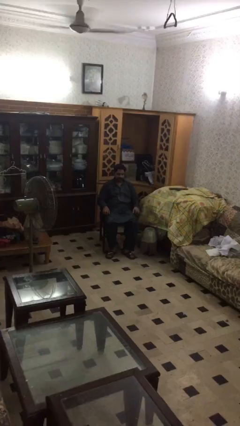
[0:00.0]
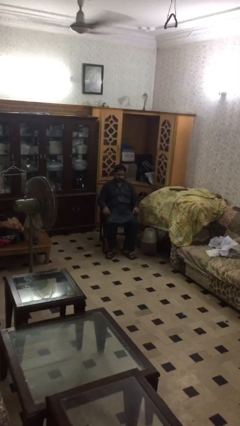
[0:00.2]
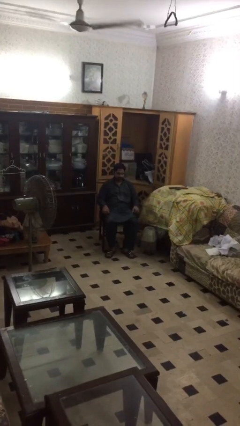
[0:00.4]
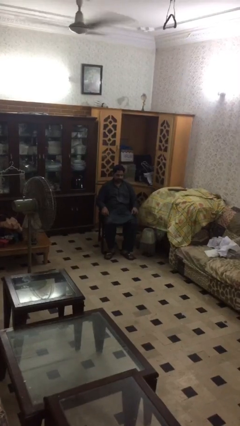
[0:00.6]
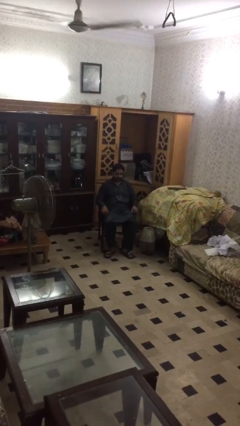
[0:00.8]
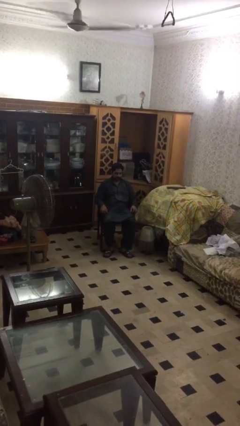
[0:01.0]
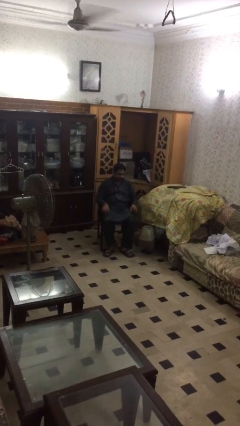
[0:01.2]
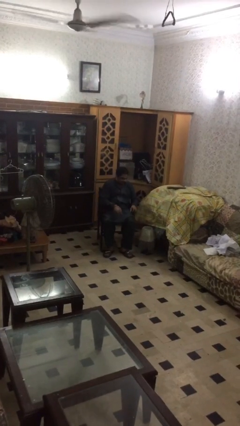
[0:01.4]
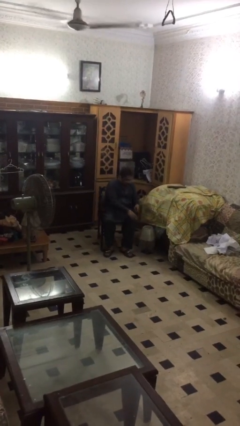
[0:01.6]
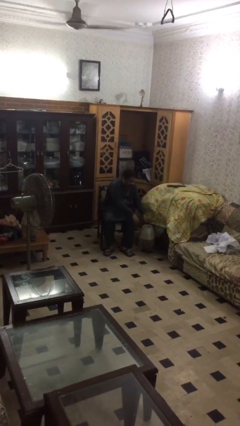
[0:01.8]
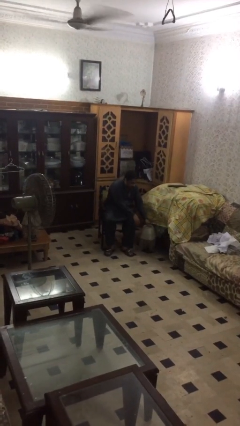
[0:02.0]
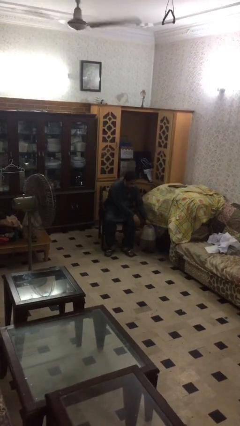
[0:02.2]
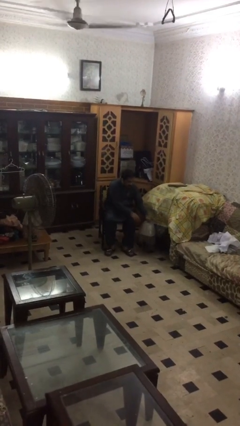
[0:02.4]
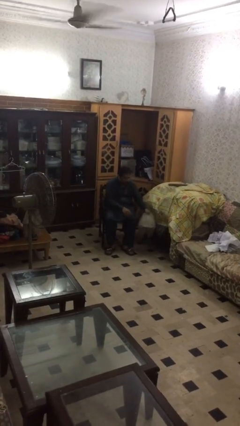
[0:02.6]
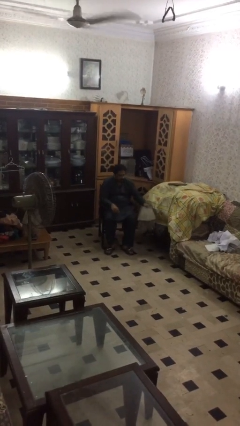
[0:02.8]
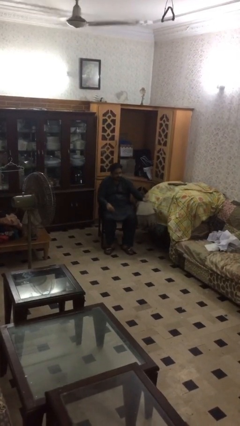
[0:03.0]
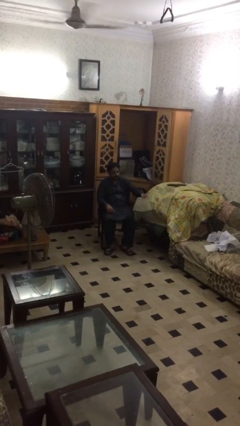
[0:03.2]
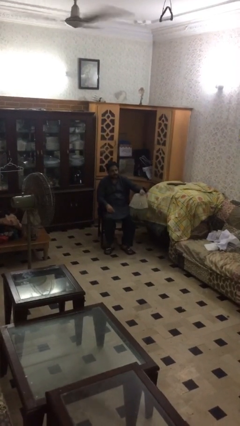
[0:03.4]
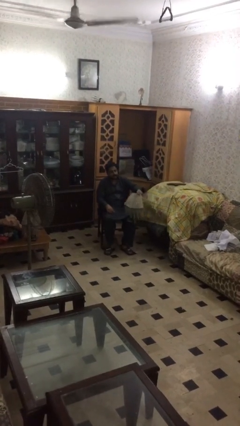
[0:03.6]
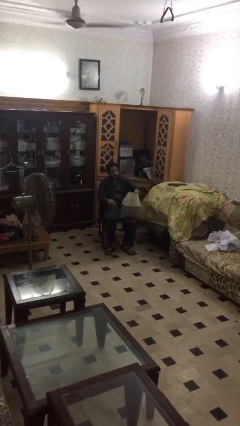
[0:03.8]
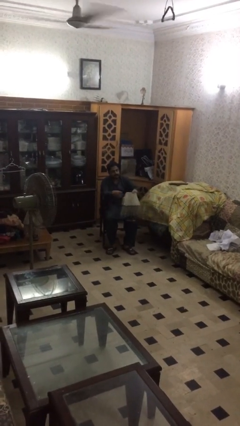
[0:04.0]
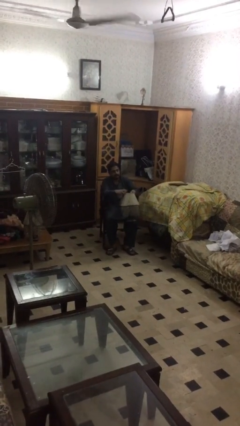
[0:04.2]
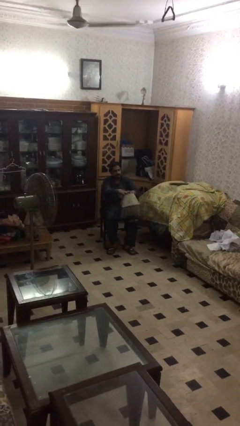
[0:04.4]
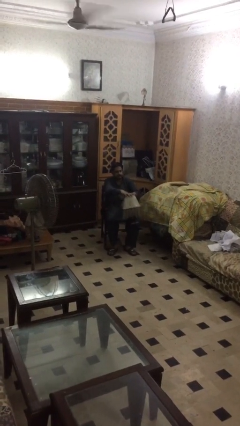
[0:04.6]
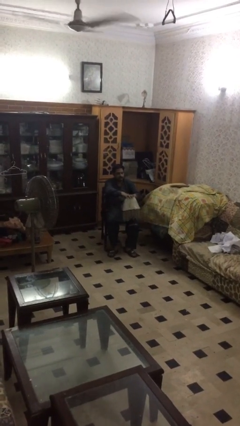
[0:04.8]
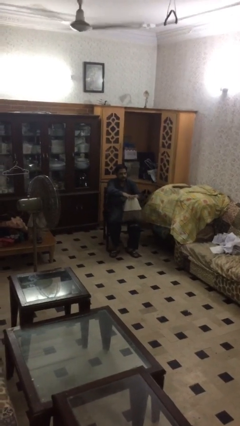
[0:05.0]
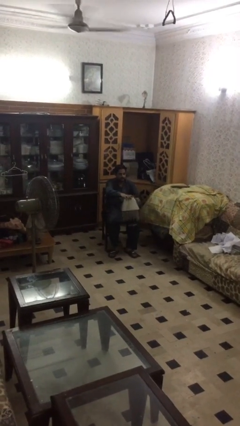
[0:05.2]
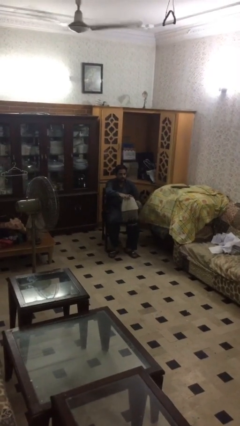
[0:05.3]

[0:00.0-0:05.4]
person picks up object from floor

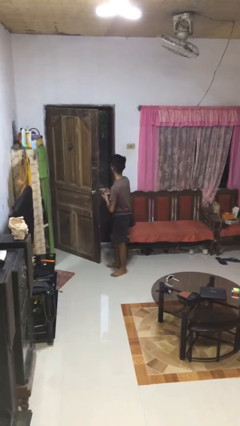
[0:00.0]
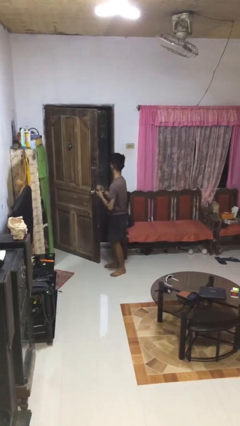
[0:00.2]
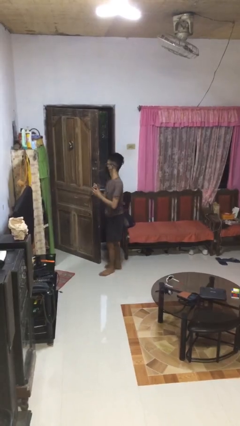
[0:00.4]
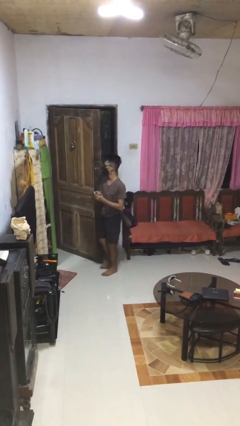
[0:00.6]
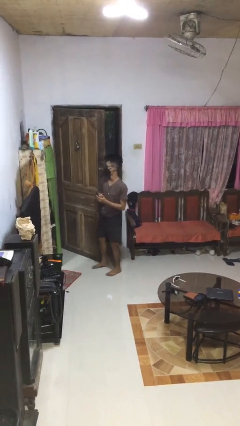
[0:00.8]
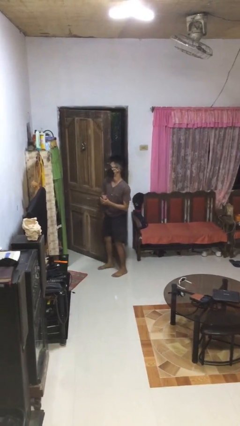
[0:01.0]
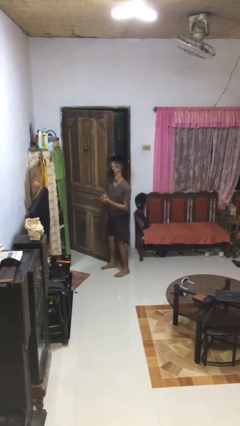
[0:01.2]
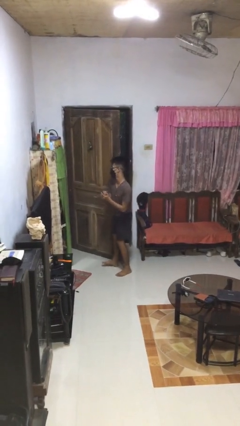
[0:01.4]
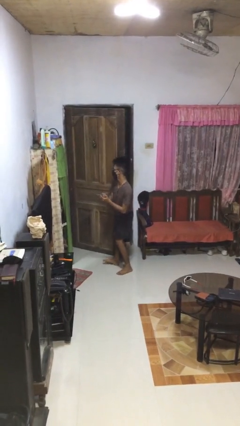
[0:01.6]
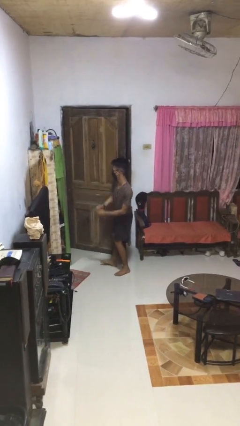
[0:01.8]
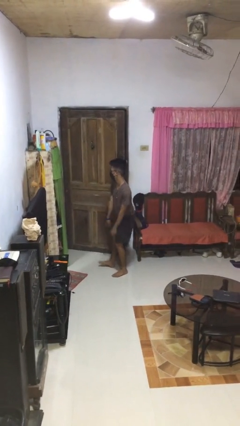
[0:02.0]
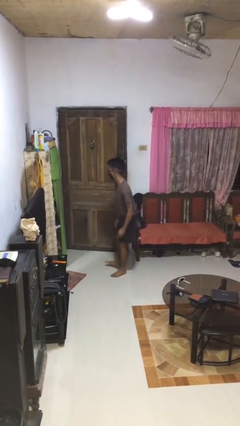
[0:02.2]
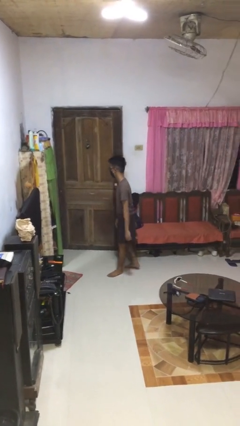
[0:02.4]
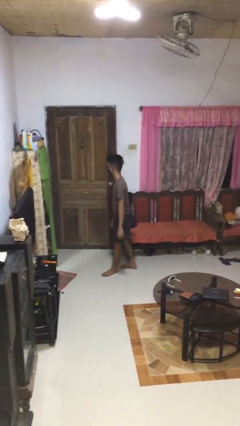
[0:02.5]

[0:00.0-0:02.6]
person closes door with hip

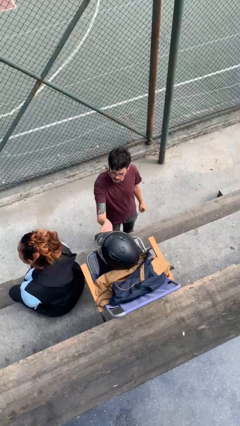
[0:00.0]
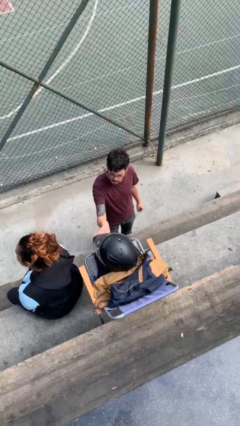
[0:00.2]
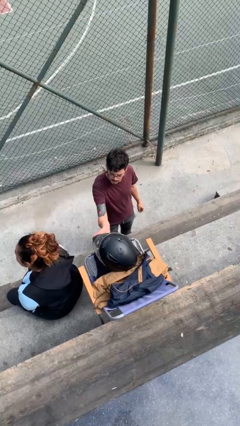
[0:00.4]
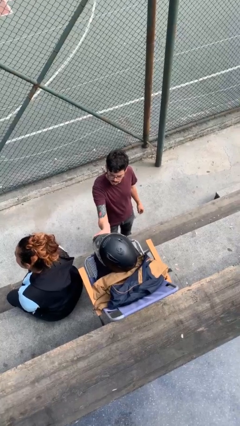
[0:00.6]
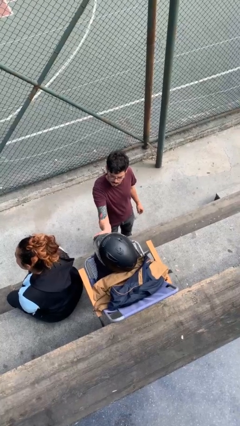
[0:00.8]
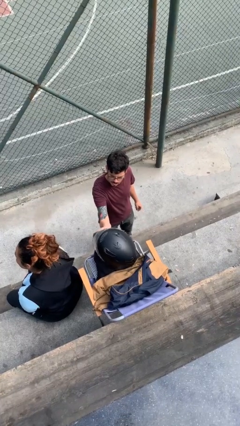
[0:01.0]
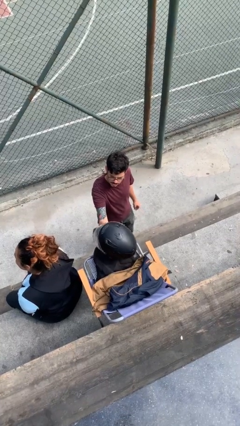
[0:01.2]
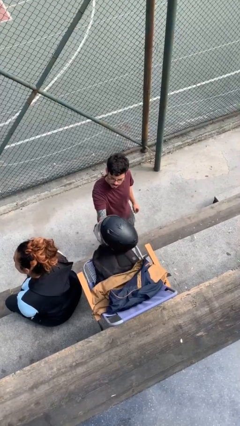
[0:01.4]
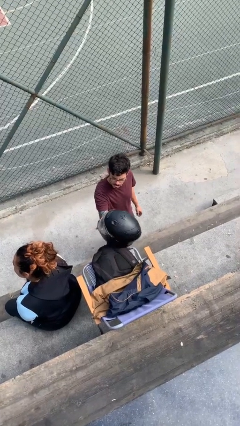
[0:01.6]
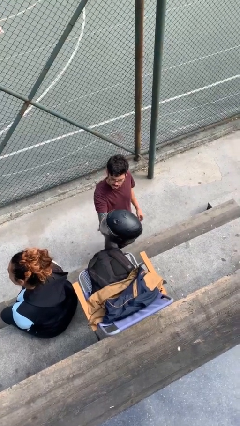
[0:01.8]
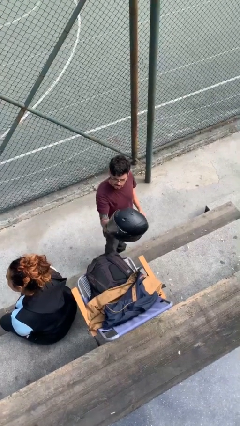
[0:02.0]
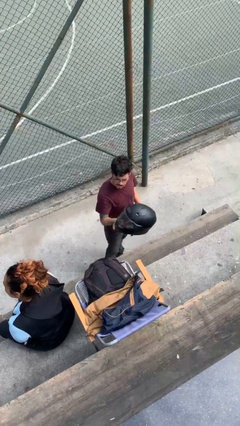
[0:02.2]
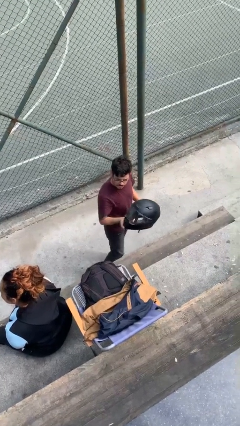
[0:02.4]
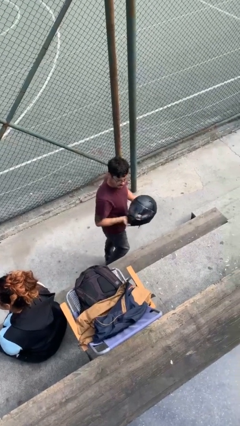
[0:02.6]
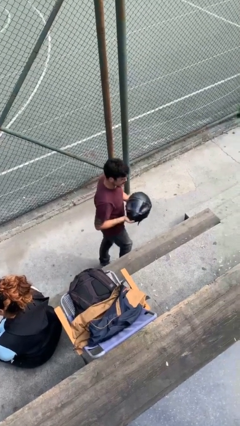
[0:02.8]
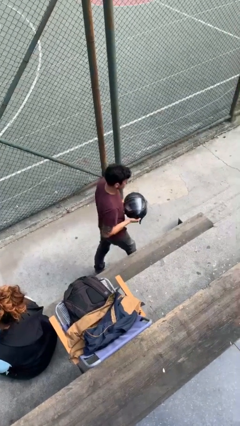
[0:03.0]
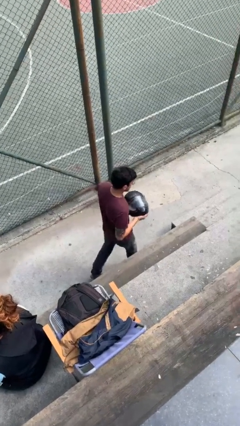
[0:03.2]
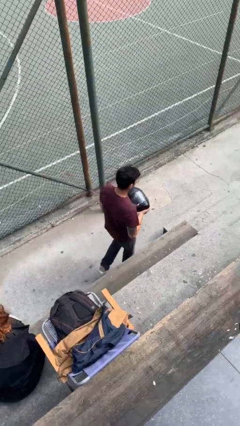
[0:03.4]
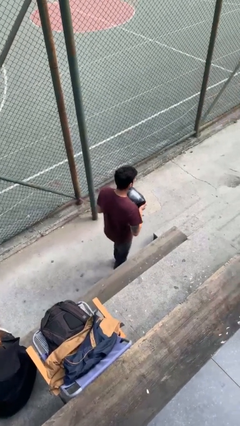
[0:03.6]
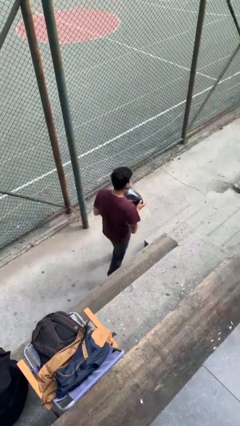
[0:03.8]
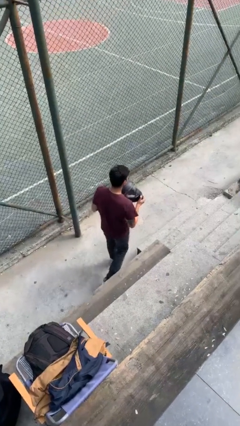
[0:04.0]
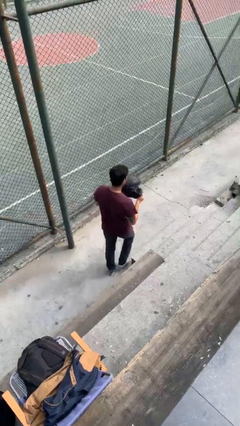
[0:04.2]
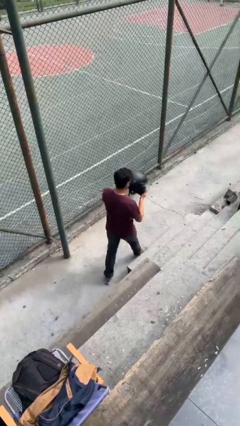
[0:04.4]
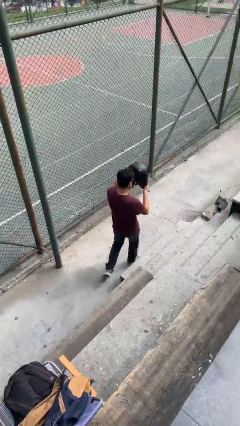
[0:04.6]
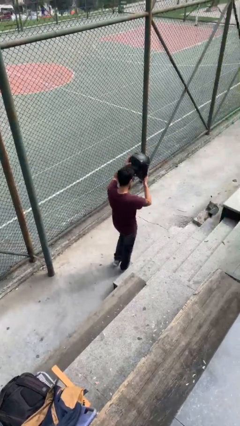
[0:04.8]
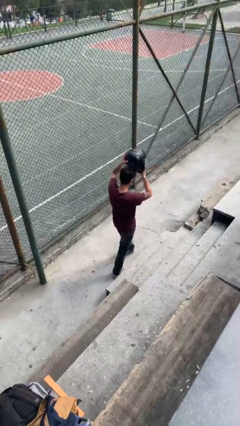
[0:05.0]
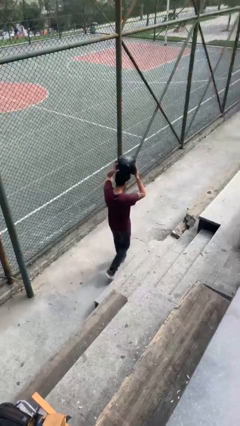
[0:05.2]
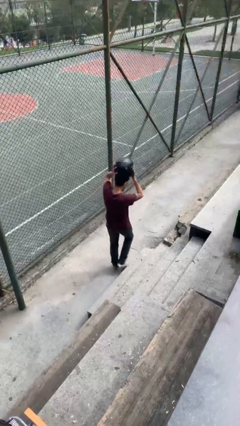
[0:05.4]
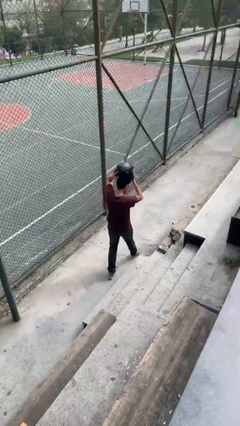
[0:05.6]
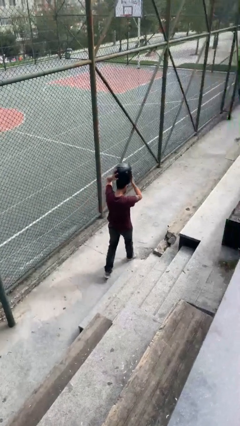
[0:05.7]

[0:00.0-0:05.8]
person steals object from person

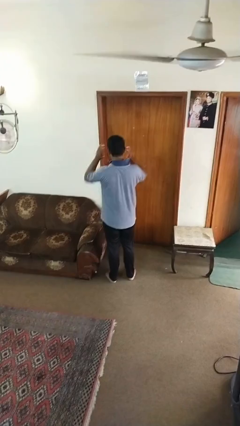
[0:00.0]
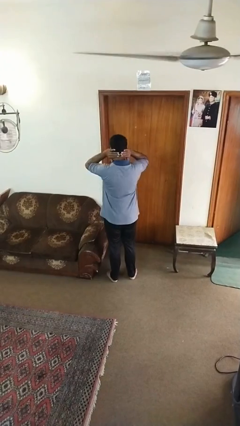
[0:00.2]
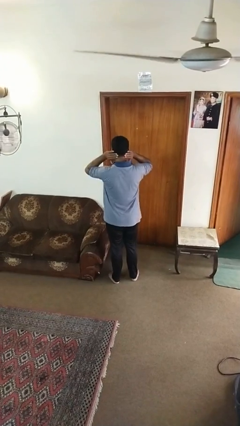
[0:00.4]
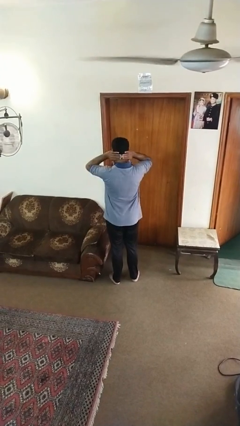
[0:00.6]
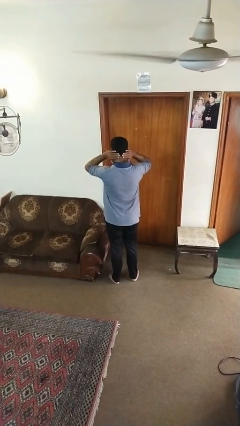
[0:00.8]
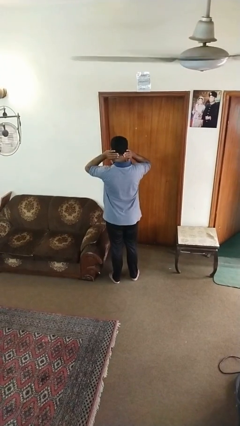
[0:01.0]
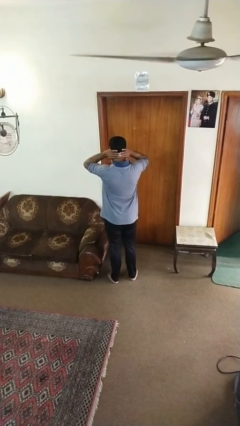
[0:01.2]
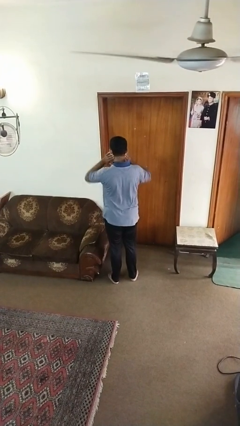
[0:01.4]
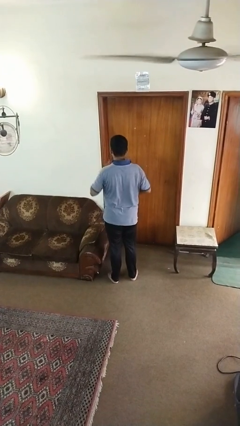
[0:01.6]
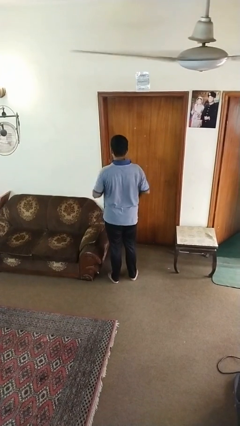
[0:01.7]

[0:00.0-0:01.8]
person rubs neck

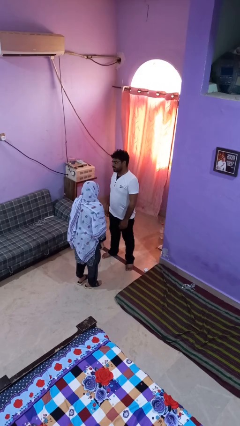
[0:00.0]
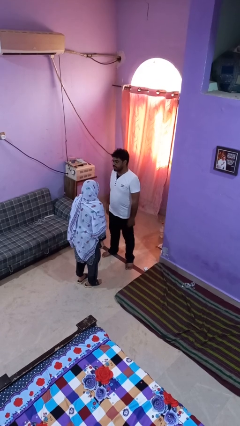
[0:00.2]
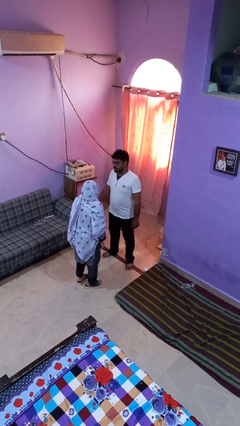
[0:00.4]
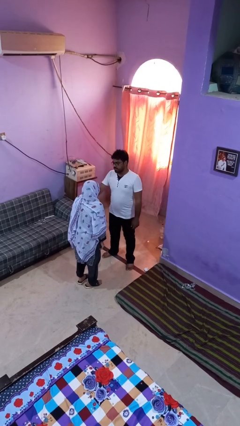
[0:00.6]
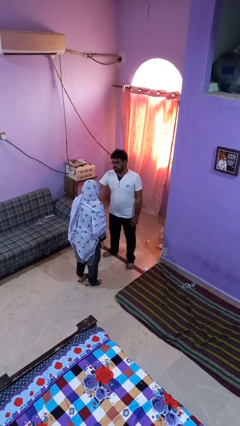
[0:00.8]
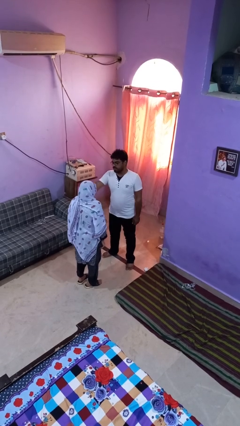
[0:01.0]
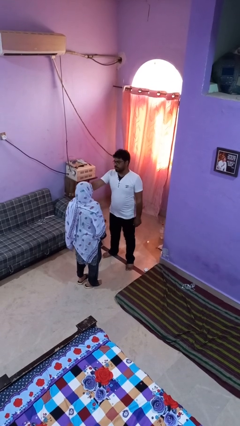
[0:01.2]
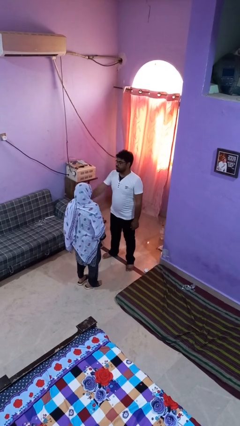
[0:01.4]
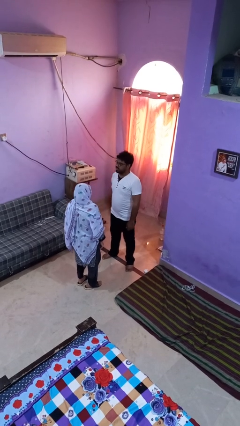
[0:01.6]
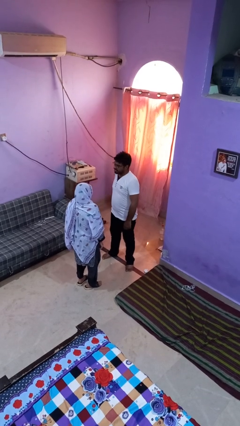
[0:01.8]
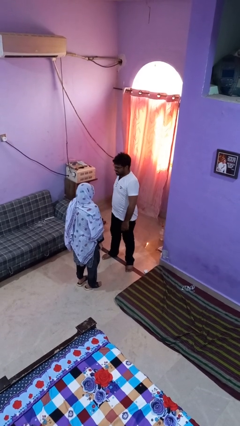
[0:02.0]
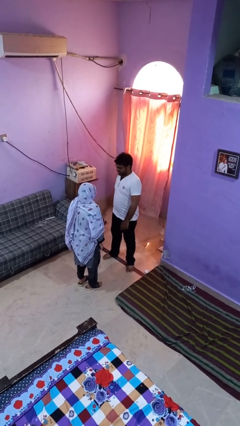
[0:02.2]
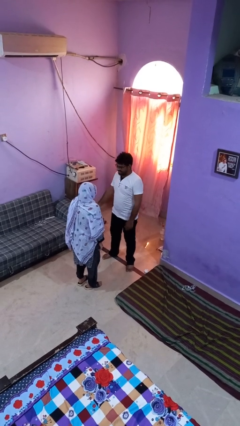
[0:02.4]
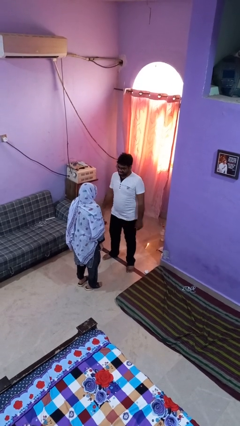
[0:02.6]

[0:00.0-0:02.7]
person shoves person
